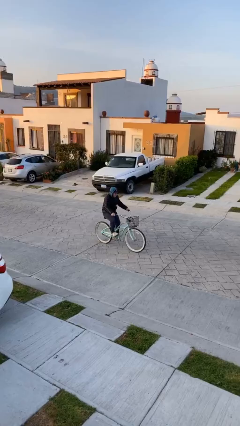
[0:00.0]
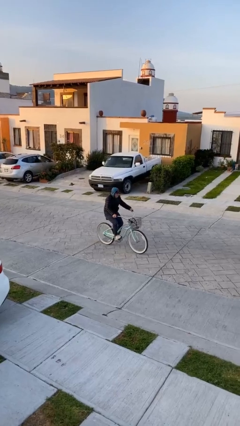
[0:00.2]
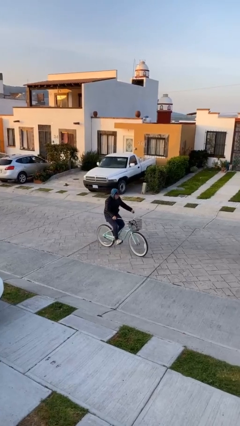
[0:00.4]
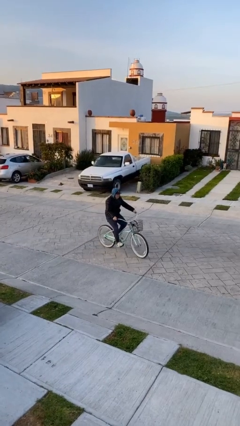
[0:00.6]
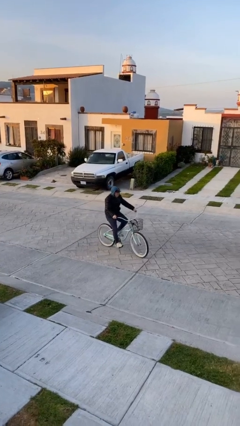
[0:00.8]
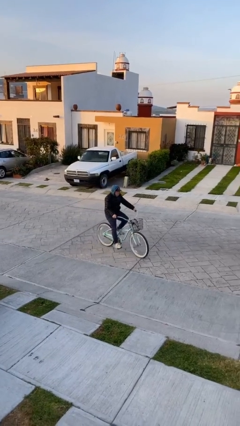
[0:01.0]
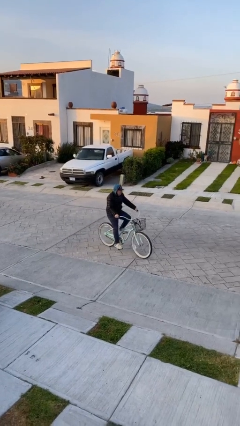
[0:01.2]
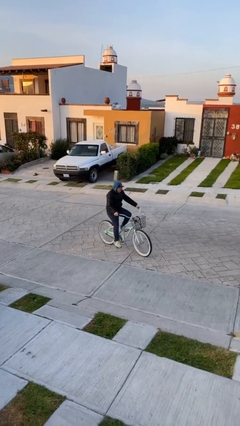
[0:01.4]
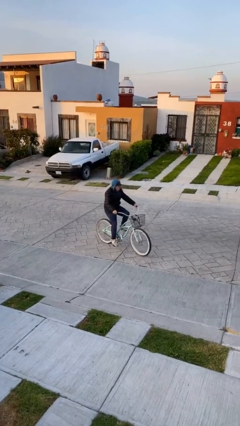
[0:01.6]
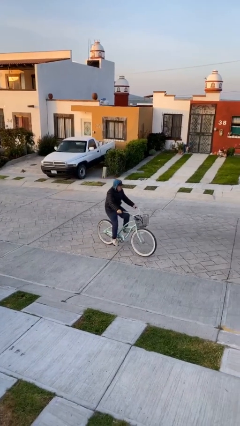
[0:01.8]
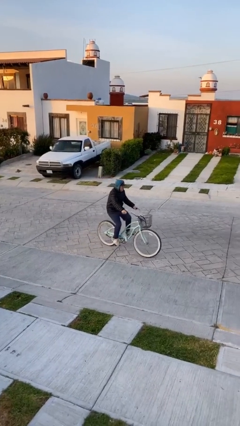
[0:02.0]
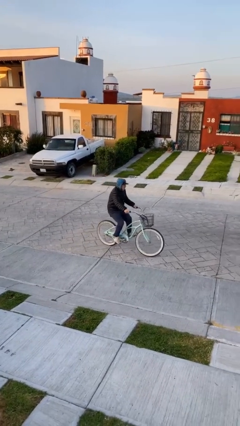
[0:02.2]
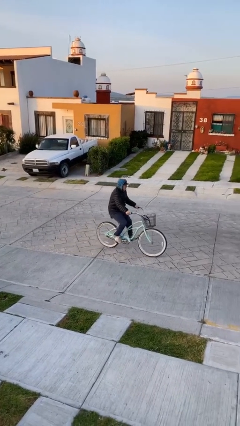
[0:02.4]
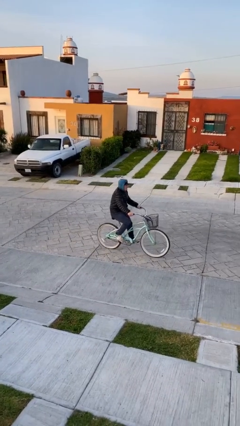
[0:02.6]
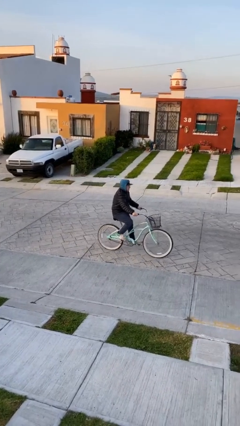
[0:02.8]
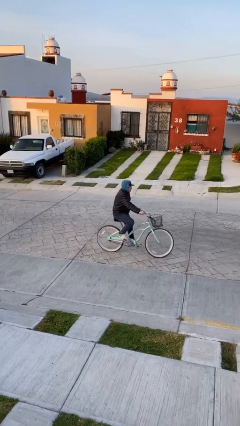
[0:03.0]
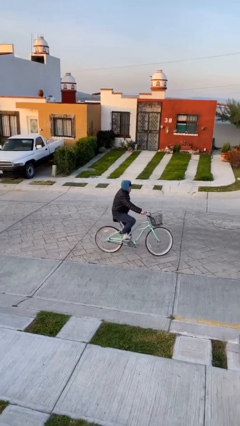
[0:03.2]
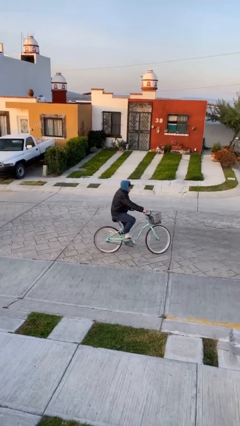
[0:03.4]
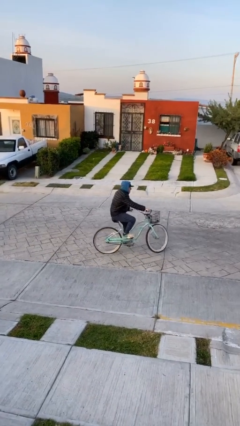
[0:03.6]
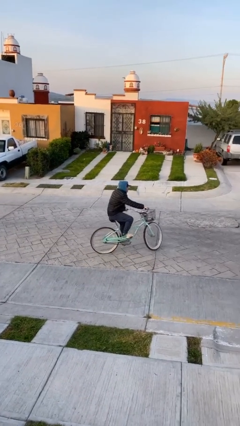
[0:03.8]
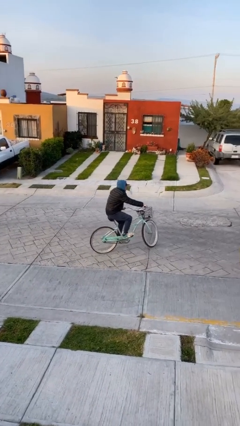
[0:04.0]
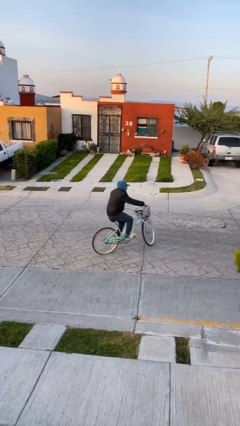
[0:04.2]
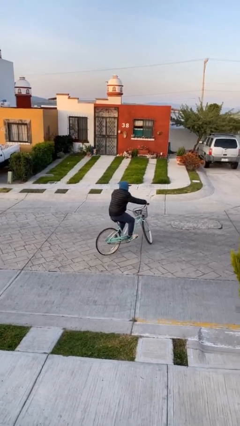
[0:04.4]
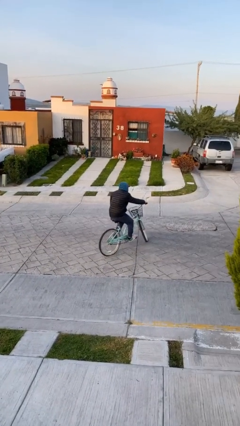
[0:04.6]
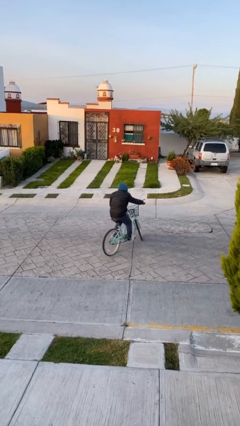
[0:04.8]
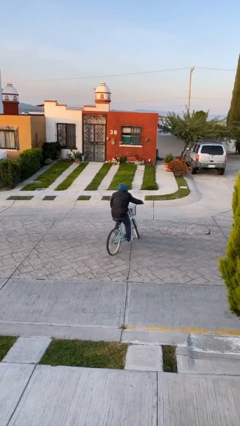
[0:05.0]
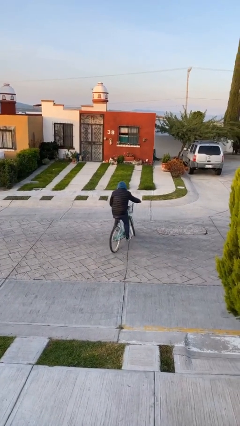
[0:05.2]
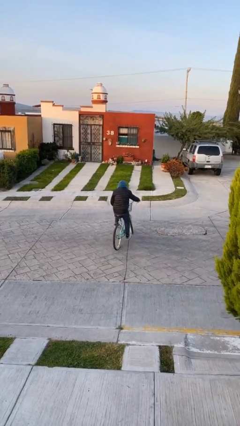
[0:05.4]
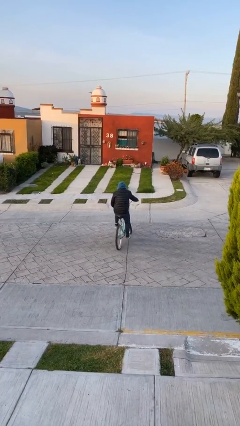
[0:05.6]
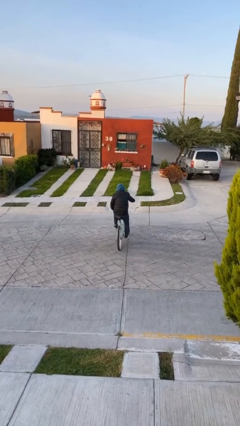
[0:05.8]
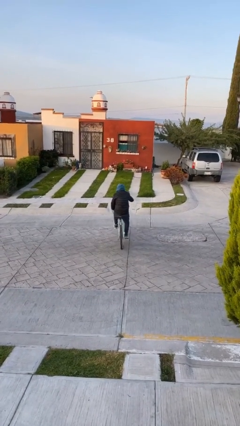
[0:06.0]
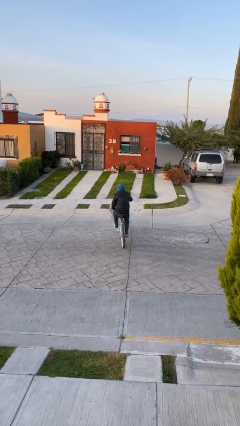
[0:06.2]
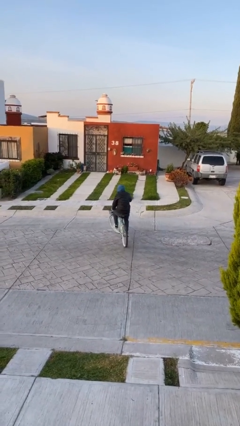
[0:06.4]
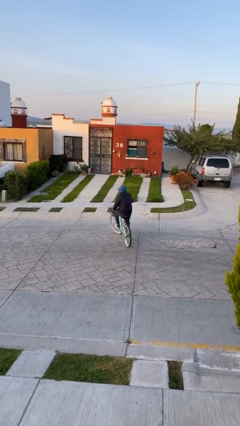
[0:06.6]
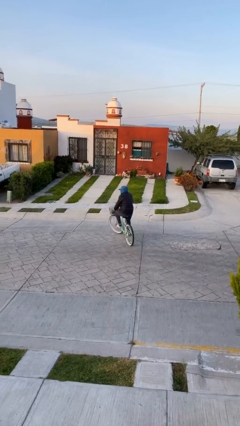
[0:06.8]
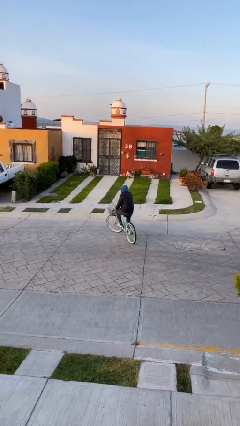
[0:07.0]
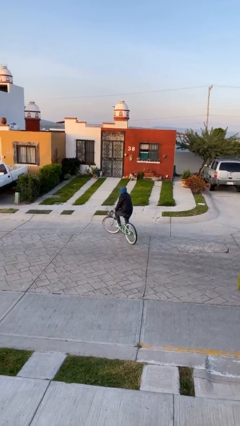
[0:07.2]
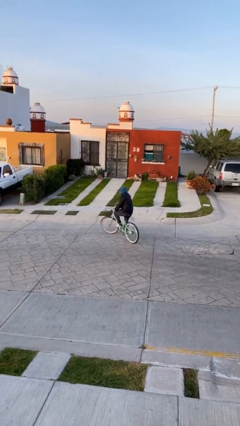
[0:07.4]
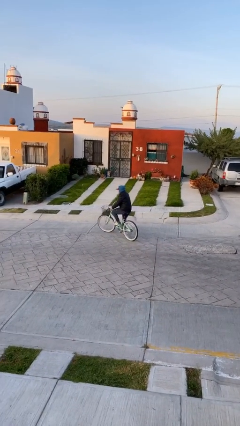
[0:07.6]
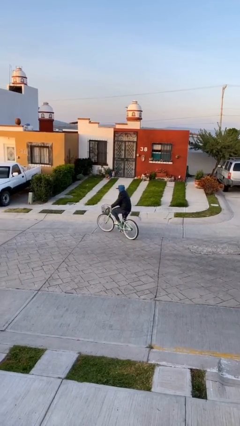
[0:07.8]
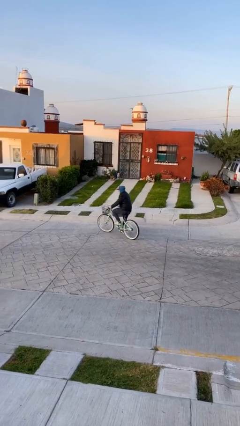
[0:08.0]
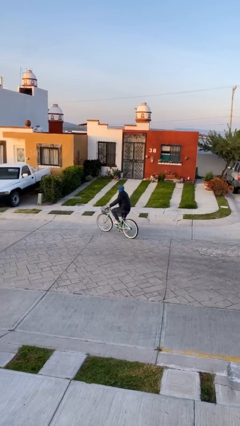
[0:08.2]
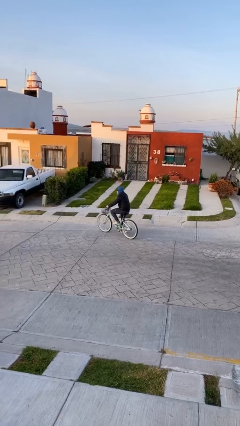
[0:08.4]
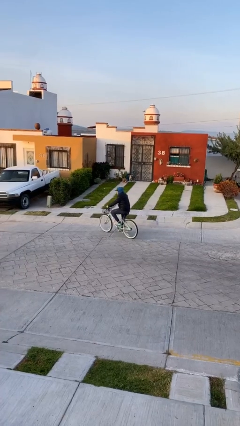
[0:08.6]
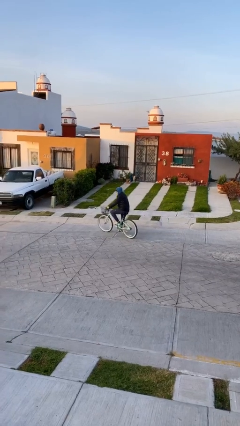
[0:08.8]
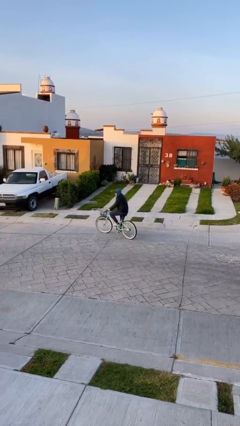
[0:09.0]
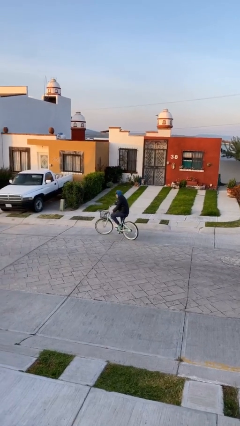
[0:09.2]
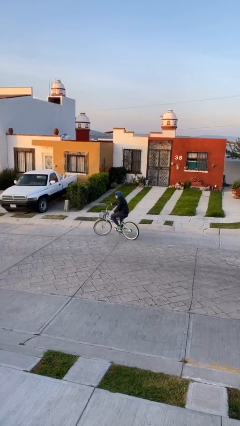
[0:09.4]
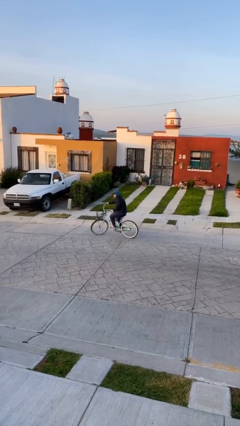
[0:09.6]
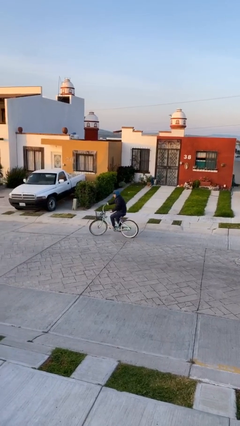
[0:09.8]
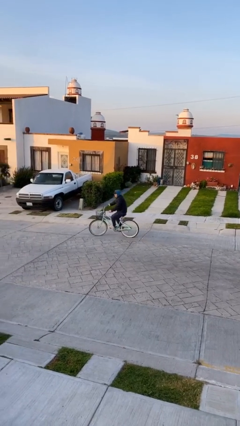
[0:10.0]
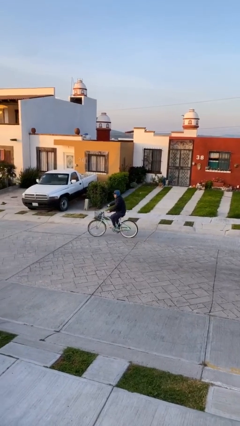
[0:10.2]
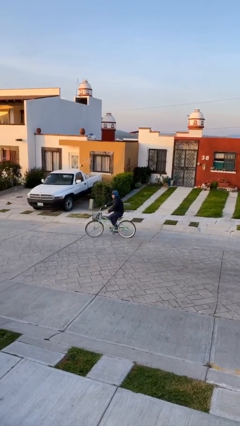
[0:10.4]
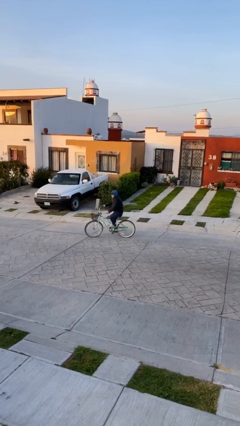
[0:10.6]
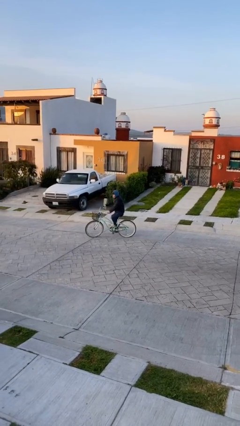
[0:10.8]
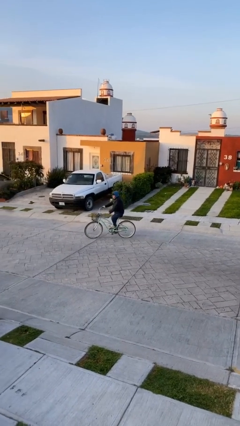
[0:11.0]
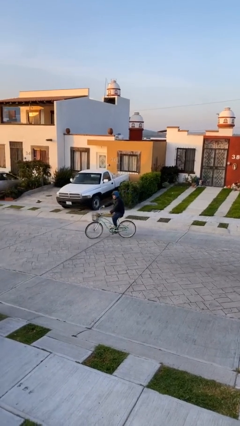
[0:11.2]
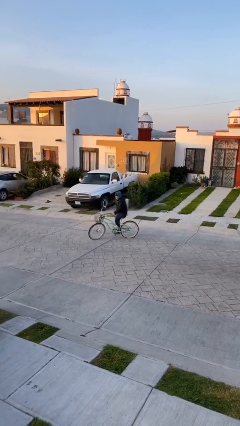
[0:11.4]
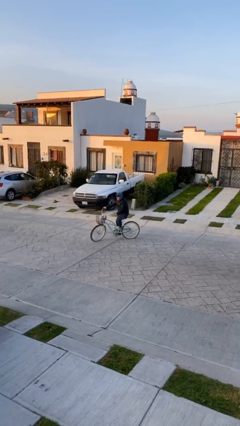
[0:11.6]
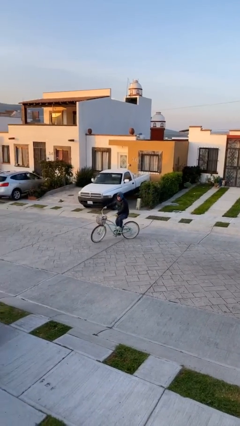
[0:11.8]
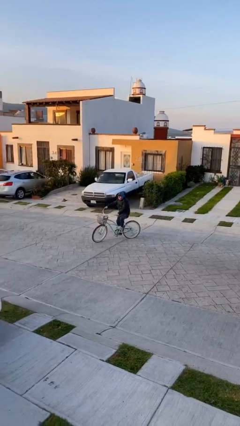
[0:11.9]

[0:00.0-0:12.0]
person rides bicycle

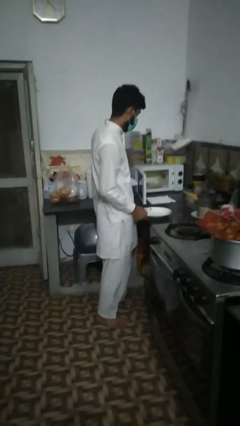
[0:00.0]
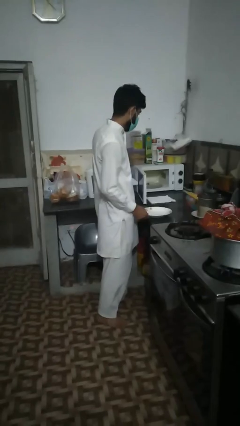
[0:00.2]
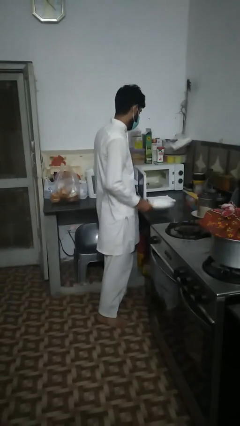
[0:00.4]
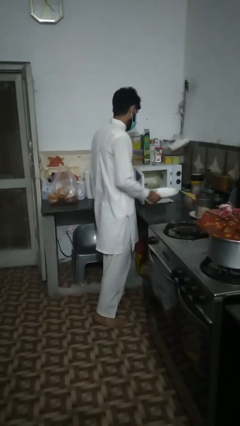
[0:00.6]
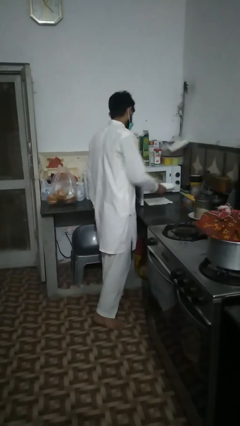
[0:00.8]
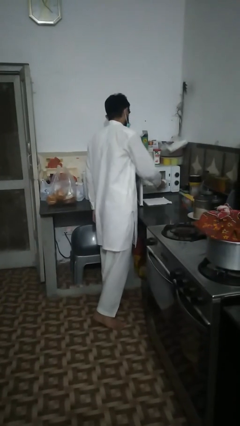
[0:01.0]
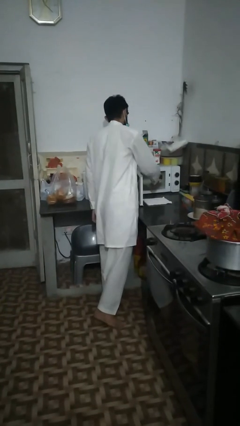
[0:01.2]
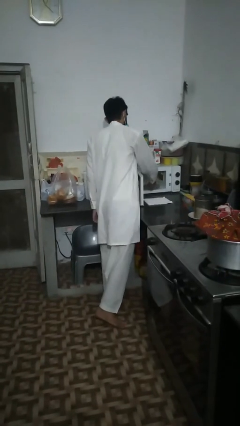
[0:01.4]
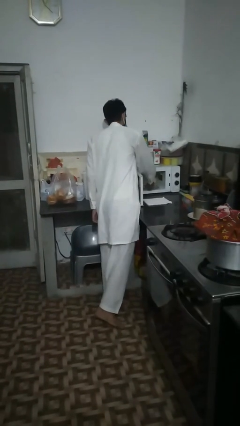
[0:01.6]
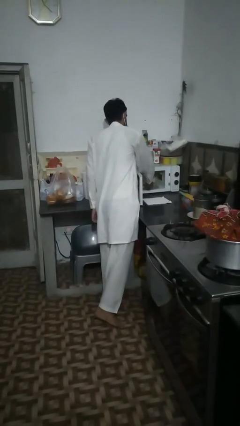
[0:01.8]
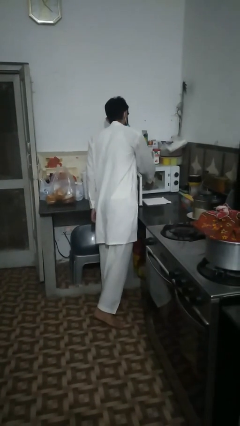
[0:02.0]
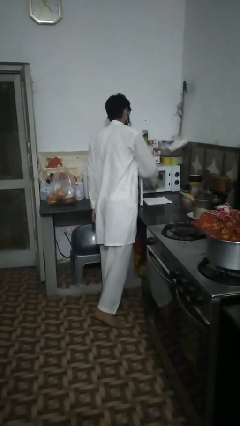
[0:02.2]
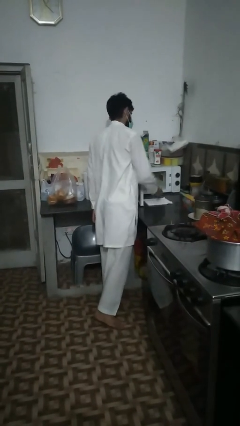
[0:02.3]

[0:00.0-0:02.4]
person puts object into microwave

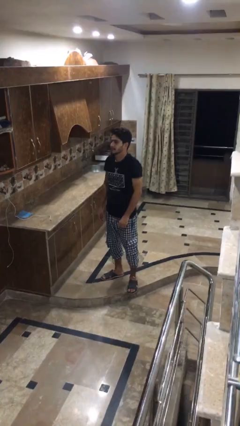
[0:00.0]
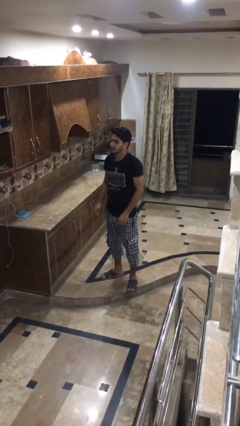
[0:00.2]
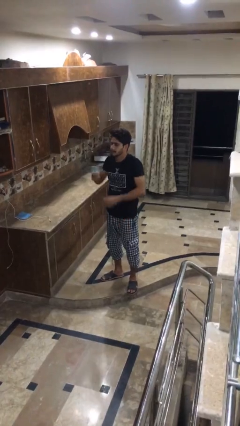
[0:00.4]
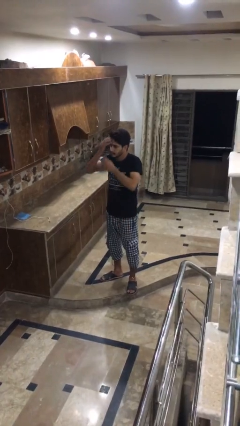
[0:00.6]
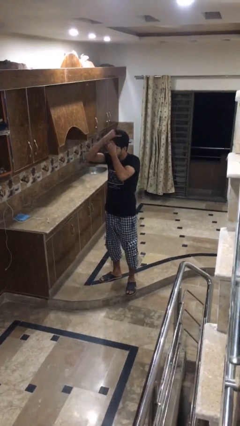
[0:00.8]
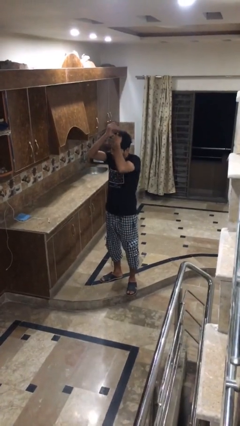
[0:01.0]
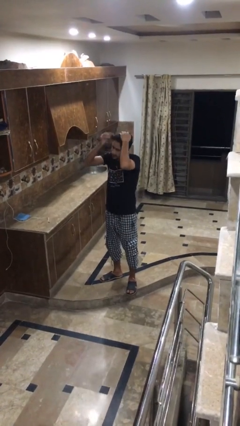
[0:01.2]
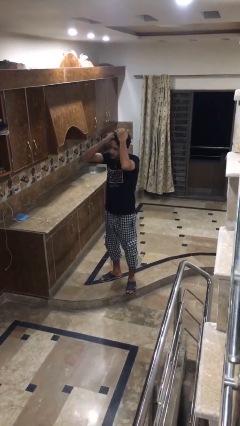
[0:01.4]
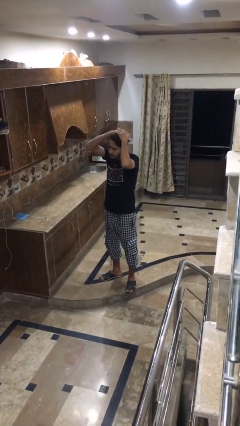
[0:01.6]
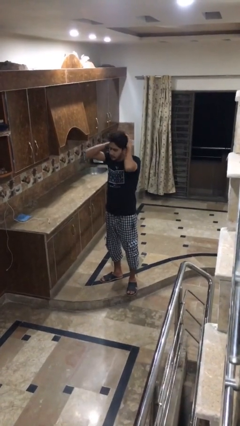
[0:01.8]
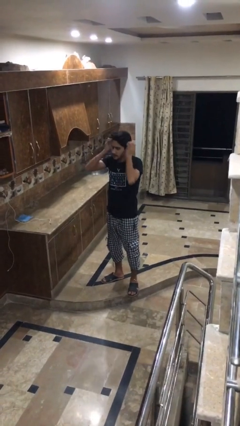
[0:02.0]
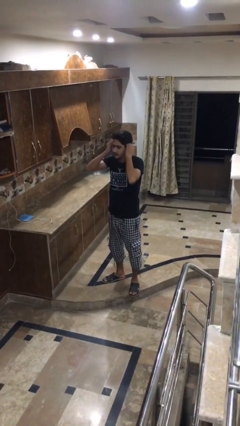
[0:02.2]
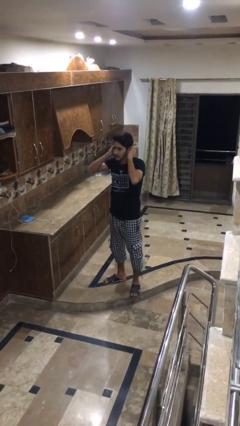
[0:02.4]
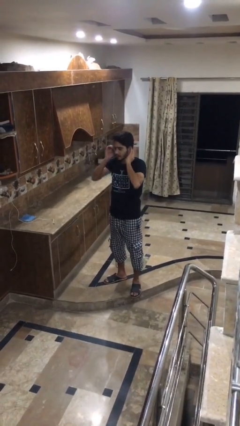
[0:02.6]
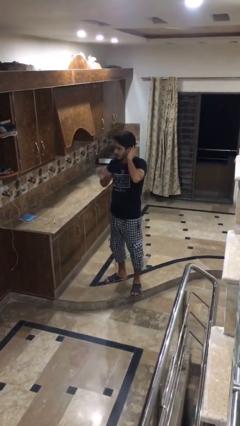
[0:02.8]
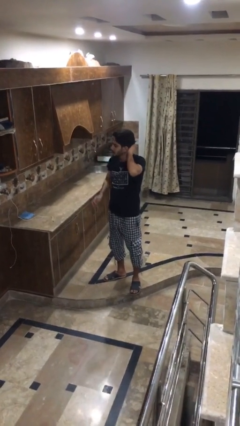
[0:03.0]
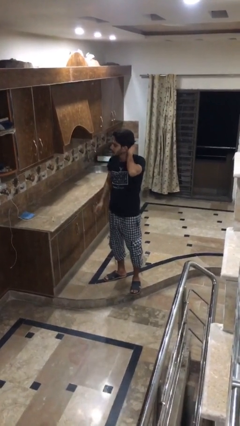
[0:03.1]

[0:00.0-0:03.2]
person strokes hair

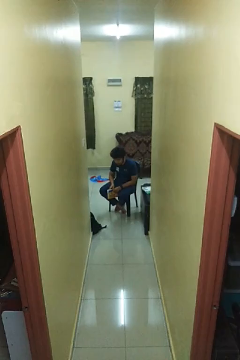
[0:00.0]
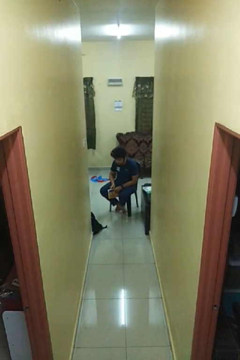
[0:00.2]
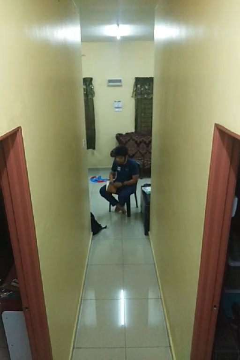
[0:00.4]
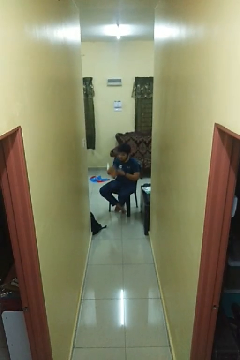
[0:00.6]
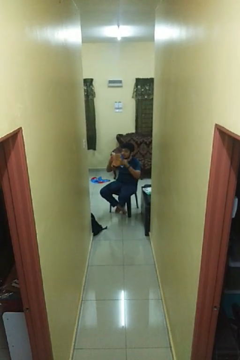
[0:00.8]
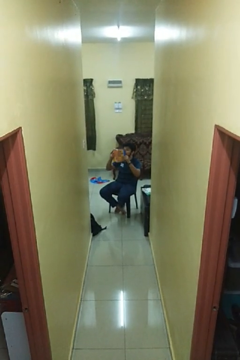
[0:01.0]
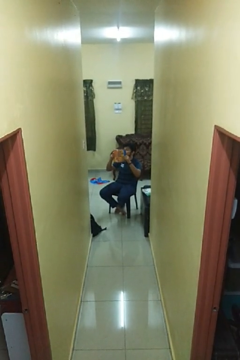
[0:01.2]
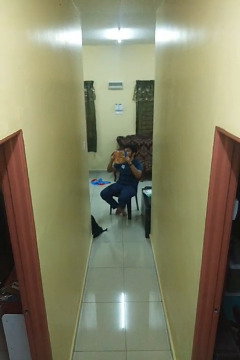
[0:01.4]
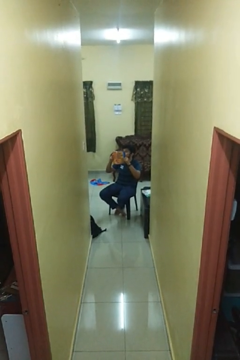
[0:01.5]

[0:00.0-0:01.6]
person reads book
